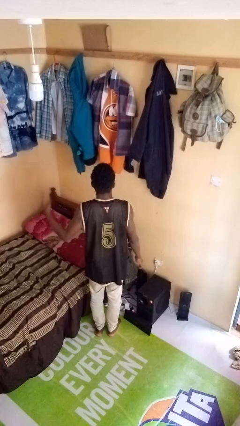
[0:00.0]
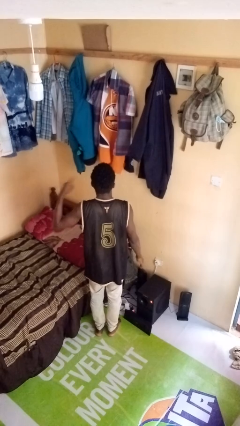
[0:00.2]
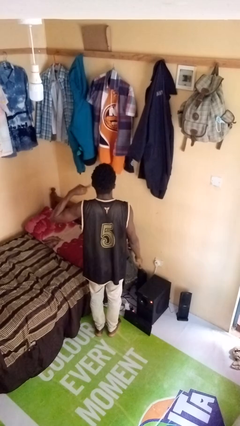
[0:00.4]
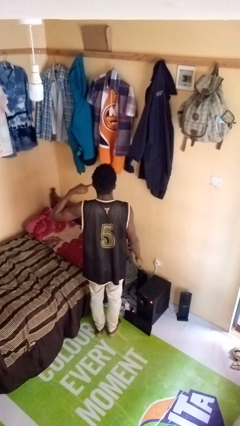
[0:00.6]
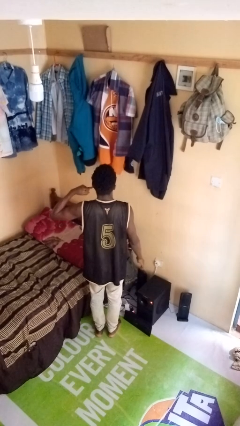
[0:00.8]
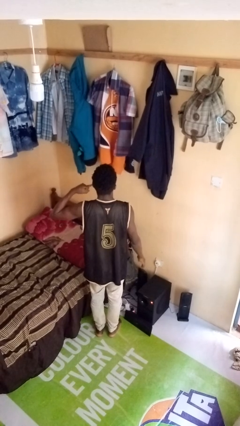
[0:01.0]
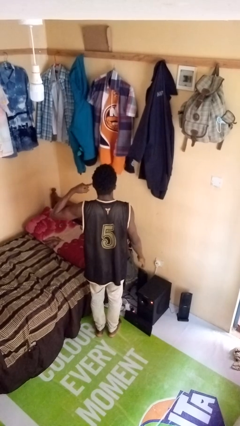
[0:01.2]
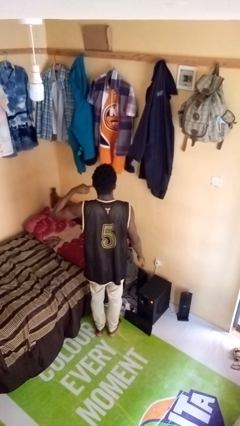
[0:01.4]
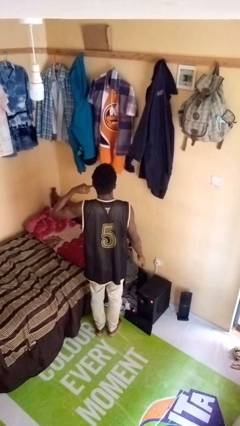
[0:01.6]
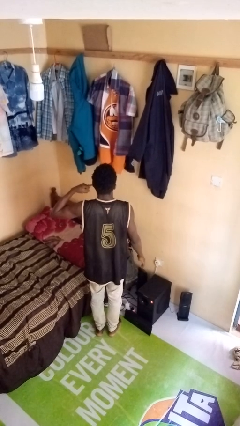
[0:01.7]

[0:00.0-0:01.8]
person gestures listen closely

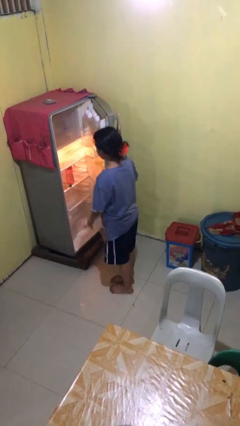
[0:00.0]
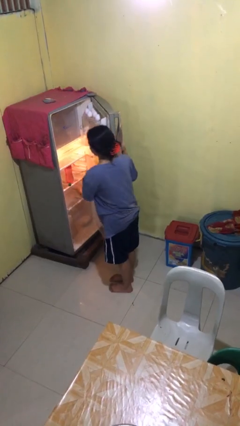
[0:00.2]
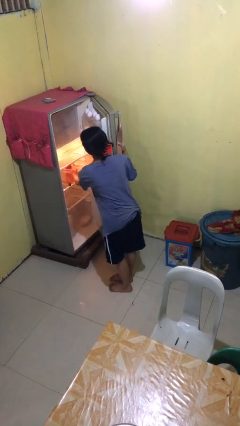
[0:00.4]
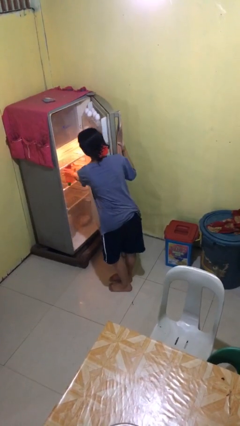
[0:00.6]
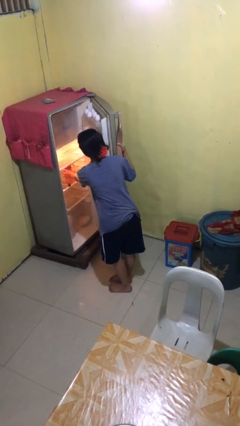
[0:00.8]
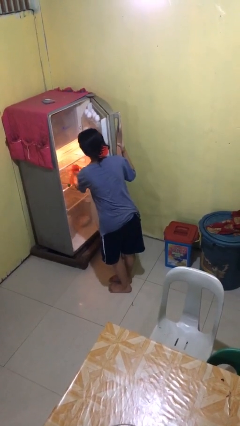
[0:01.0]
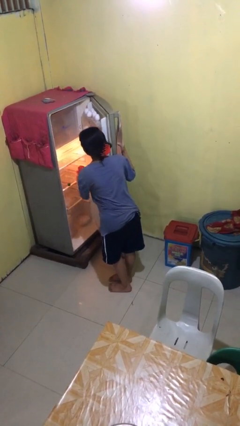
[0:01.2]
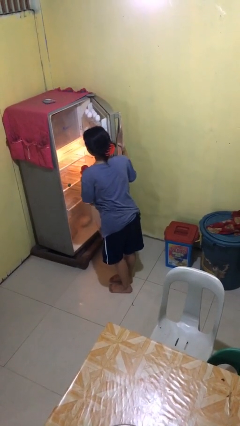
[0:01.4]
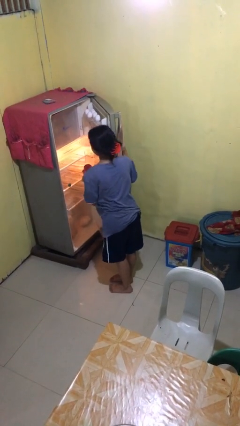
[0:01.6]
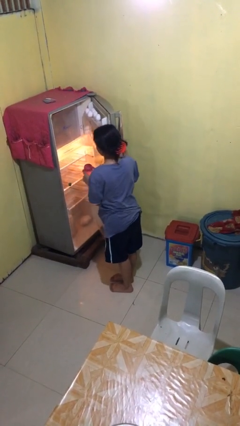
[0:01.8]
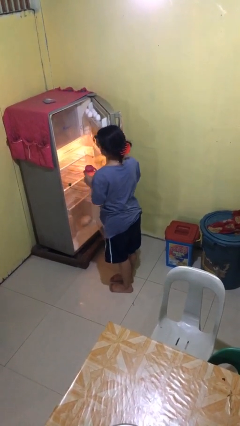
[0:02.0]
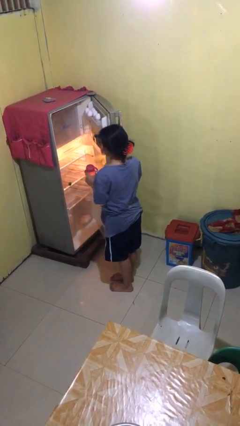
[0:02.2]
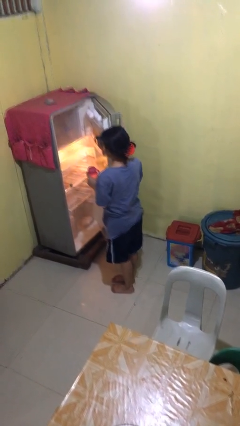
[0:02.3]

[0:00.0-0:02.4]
person takes object from refrigerator

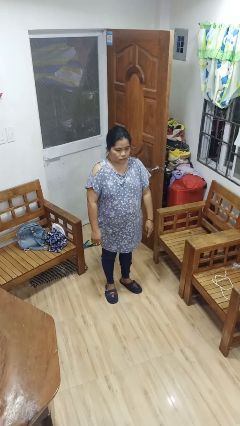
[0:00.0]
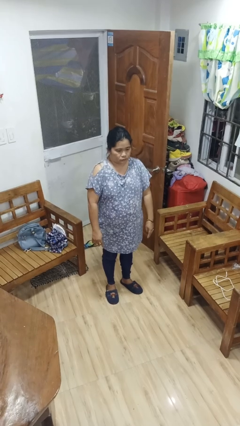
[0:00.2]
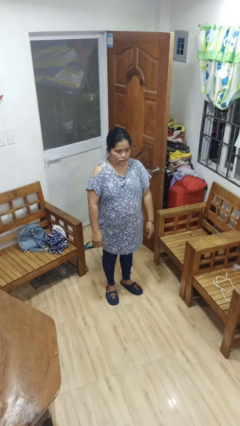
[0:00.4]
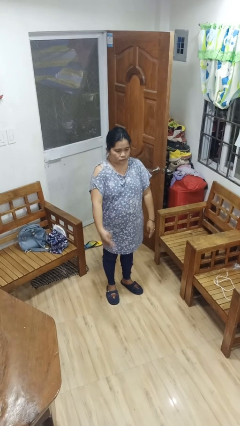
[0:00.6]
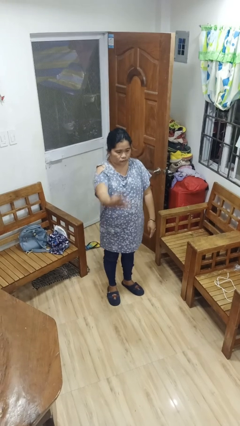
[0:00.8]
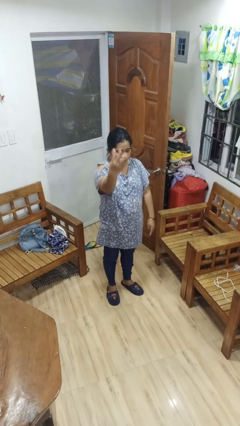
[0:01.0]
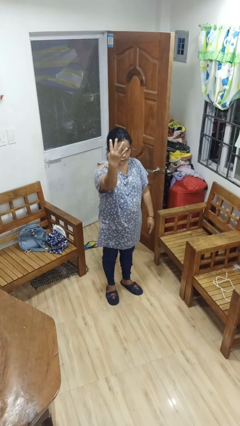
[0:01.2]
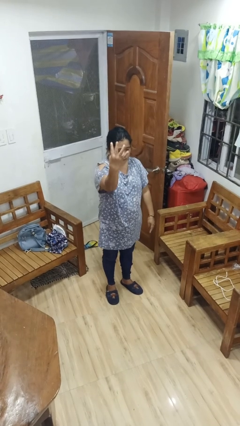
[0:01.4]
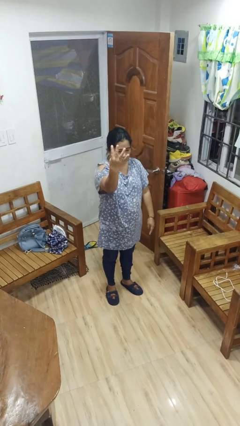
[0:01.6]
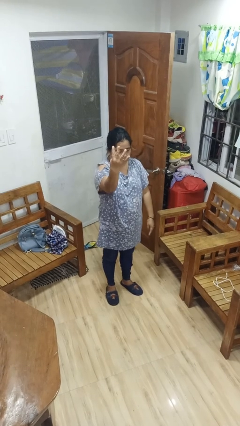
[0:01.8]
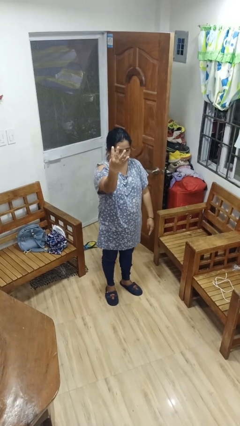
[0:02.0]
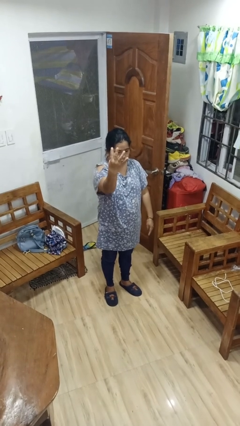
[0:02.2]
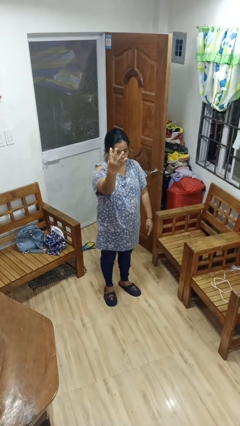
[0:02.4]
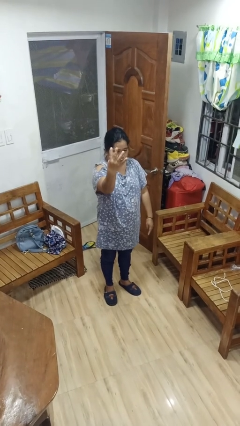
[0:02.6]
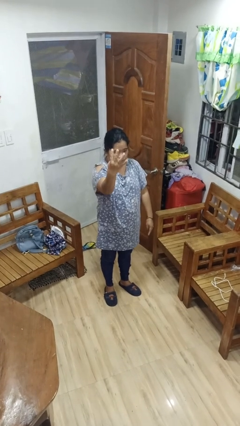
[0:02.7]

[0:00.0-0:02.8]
person gestures number four

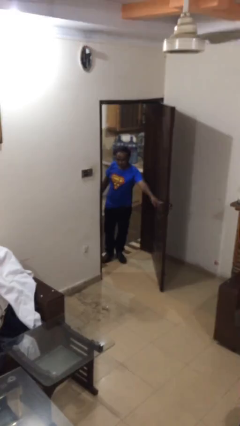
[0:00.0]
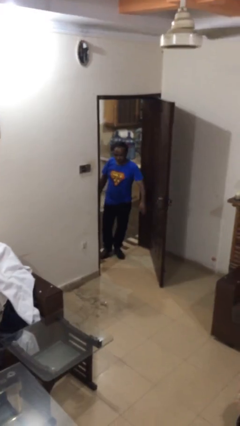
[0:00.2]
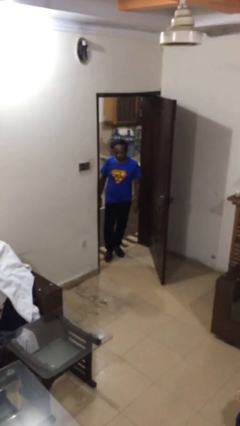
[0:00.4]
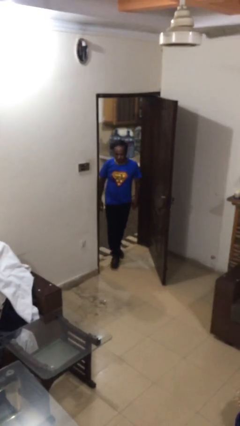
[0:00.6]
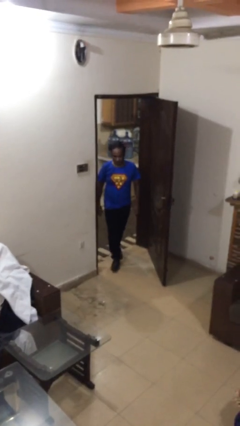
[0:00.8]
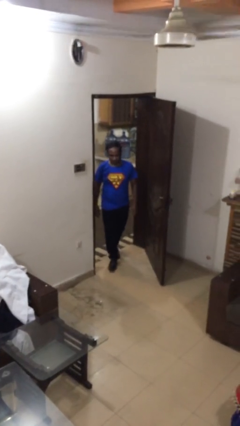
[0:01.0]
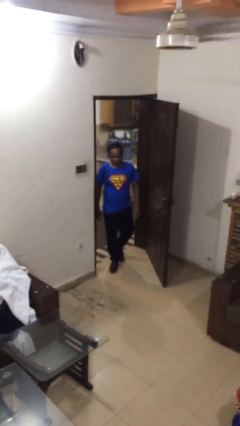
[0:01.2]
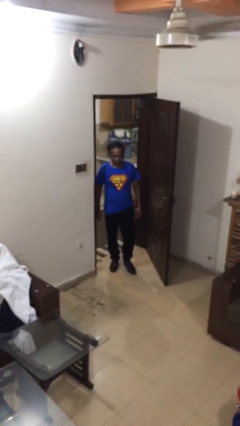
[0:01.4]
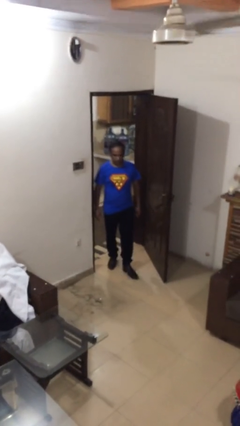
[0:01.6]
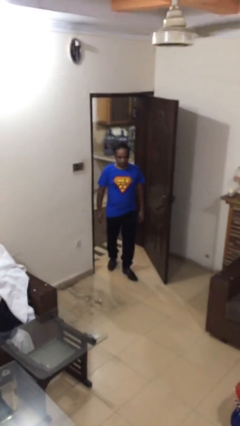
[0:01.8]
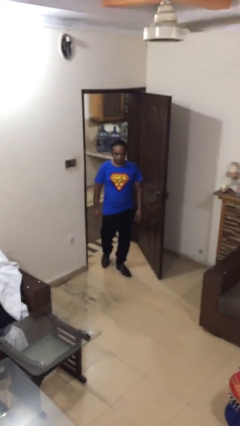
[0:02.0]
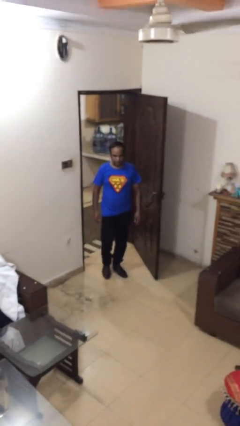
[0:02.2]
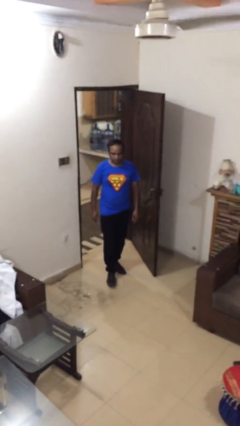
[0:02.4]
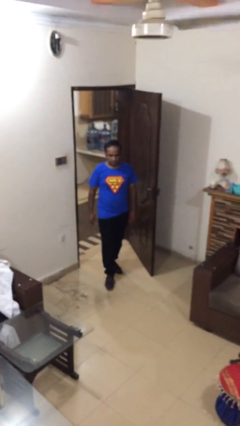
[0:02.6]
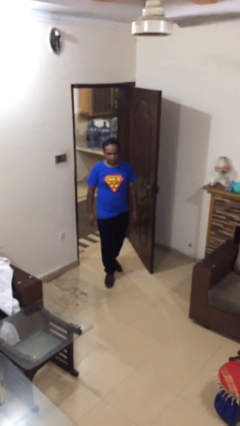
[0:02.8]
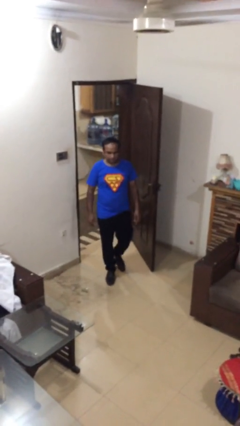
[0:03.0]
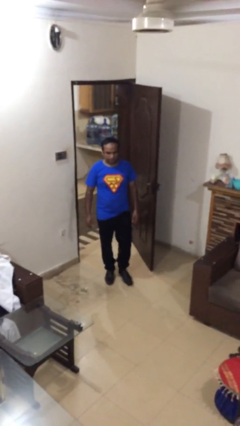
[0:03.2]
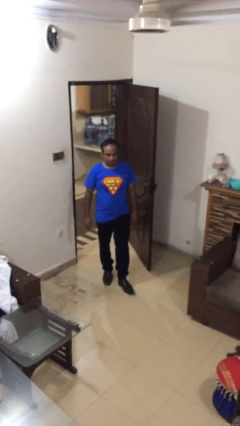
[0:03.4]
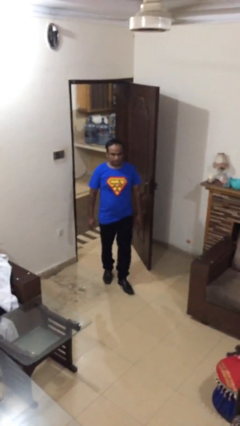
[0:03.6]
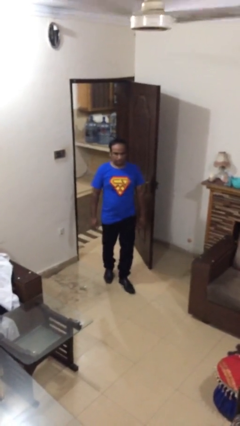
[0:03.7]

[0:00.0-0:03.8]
person enters scene through structure

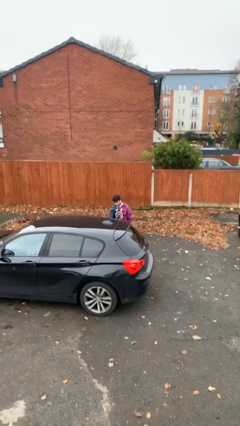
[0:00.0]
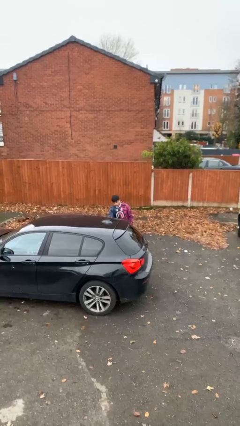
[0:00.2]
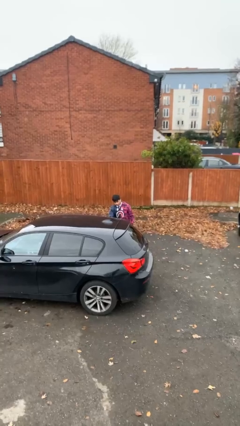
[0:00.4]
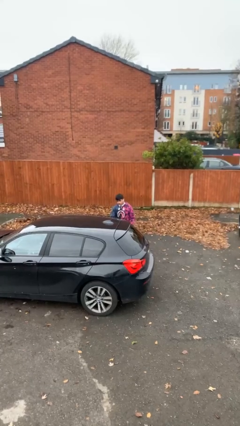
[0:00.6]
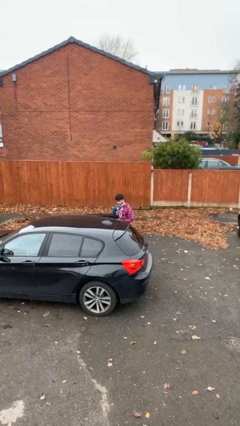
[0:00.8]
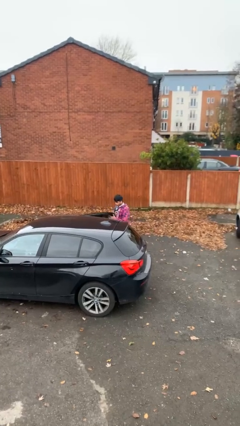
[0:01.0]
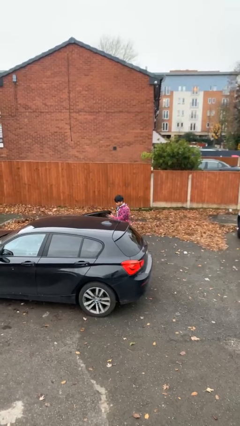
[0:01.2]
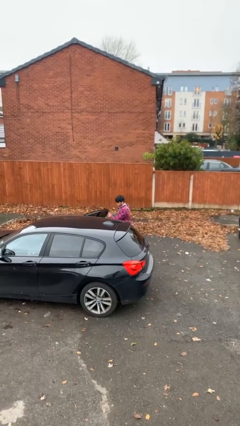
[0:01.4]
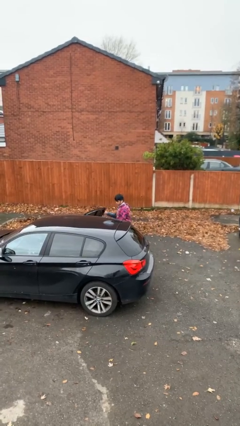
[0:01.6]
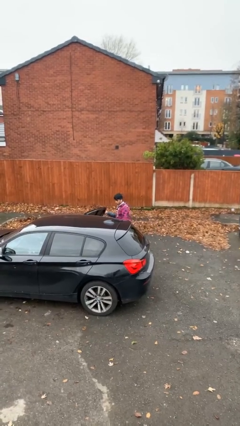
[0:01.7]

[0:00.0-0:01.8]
person opens car door

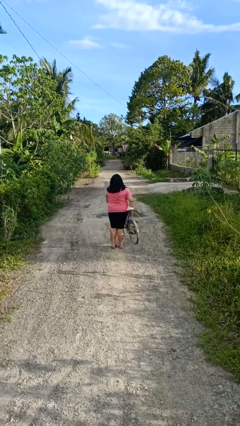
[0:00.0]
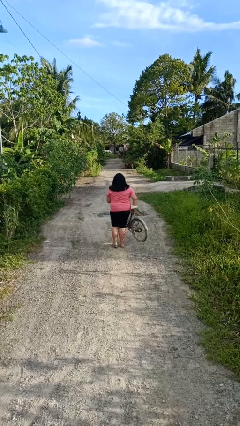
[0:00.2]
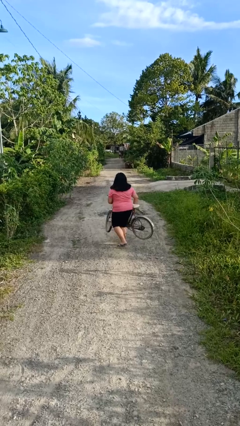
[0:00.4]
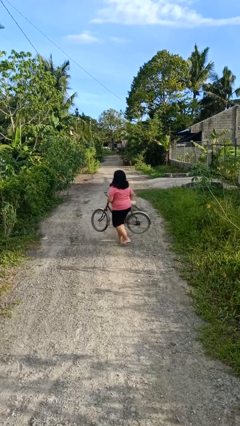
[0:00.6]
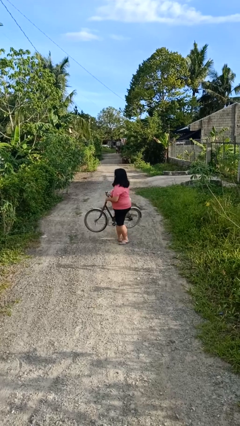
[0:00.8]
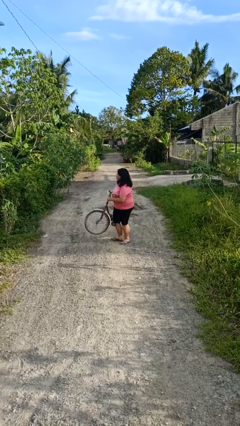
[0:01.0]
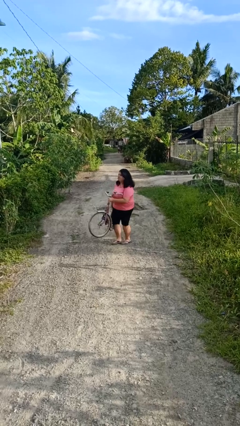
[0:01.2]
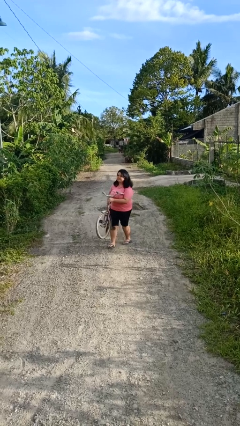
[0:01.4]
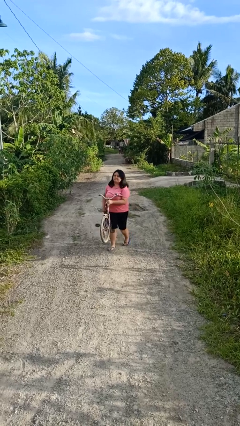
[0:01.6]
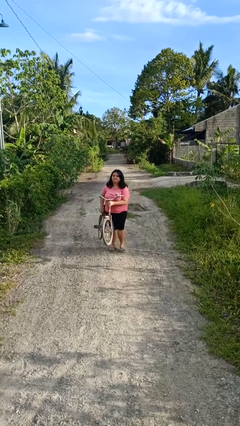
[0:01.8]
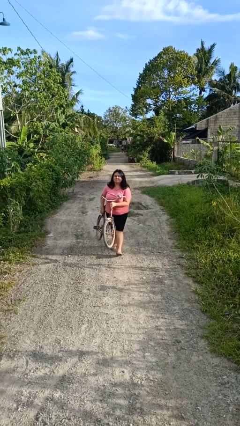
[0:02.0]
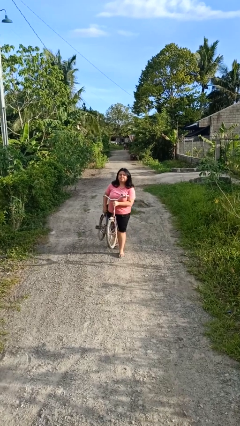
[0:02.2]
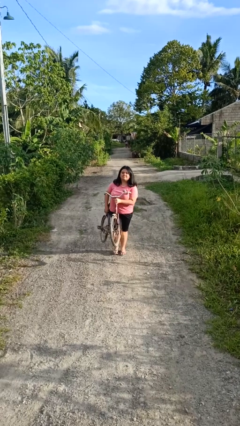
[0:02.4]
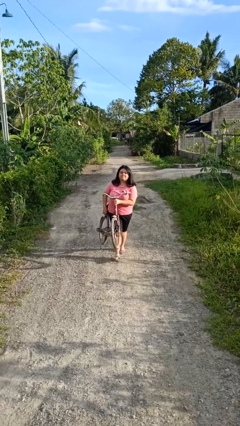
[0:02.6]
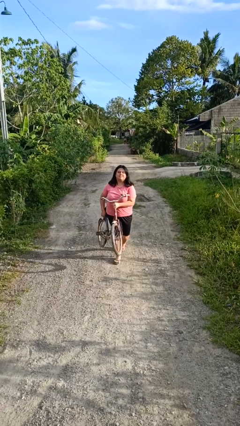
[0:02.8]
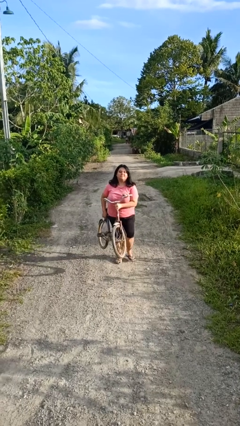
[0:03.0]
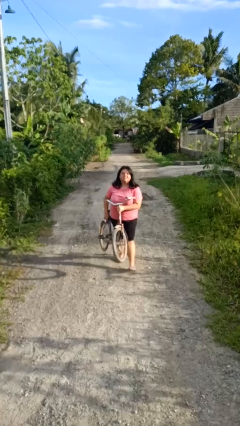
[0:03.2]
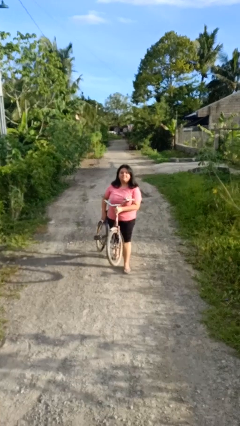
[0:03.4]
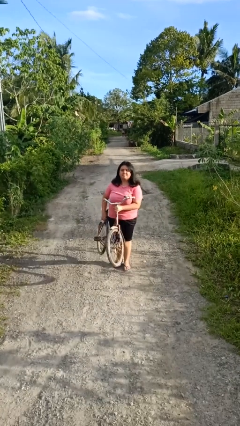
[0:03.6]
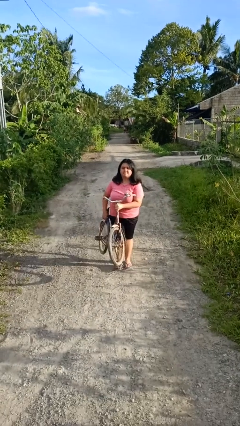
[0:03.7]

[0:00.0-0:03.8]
person carries bicycle

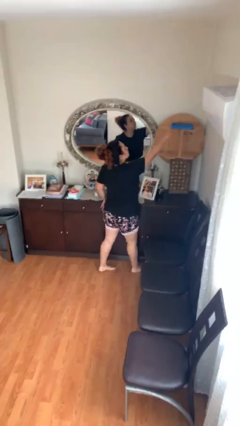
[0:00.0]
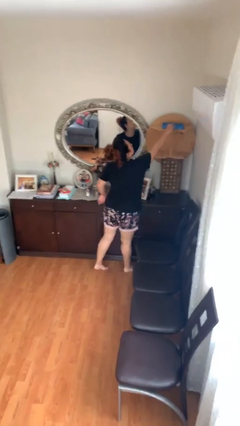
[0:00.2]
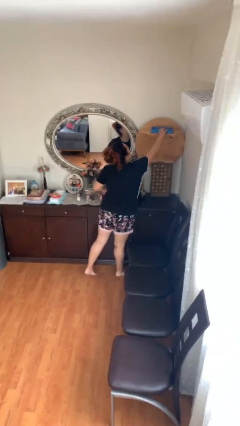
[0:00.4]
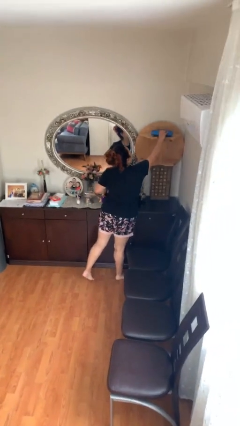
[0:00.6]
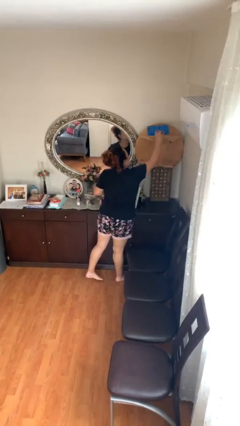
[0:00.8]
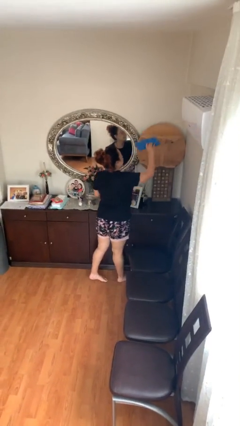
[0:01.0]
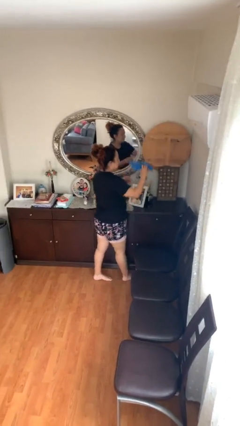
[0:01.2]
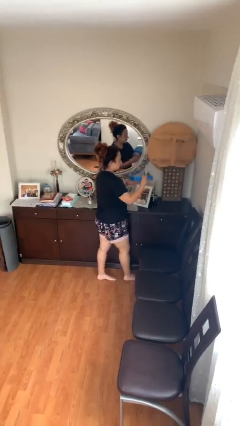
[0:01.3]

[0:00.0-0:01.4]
person picks up object from shelf
